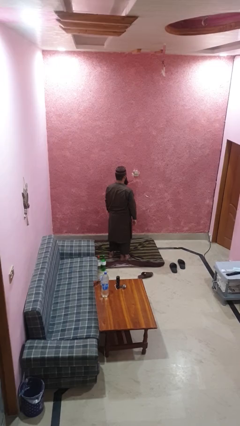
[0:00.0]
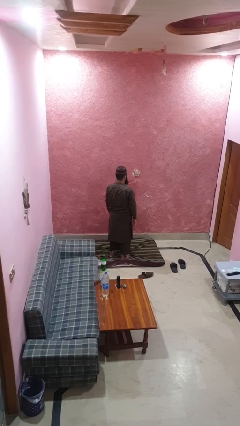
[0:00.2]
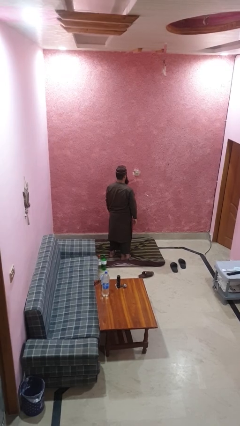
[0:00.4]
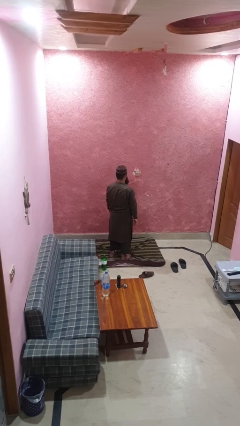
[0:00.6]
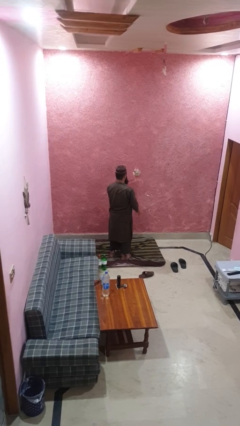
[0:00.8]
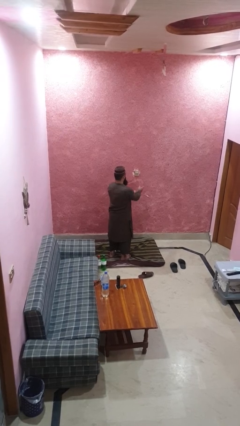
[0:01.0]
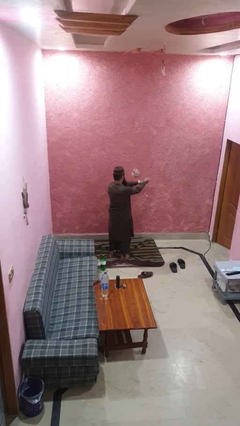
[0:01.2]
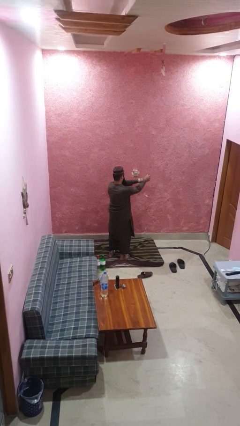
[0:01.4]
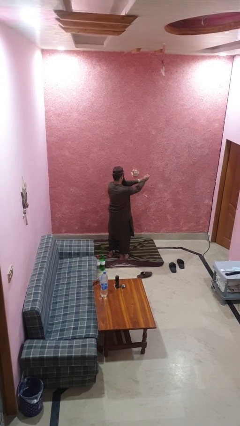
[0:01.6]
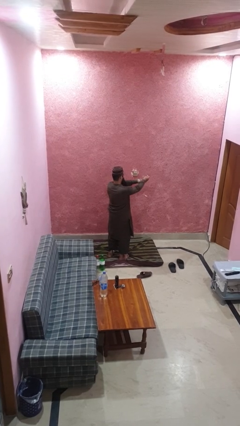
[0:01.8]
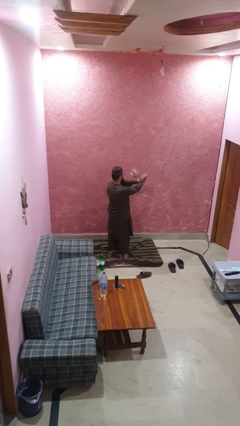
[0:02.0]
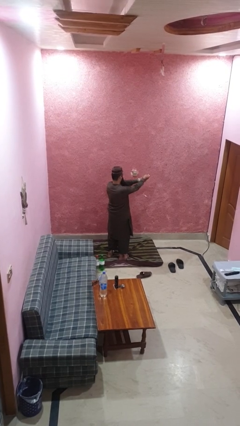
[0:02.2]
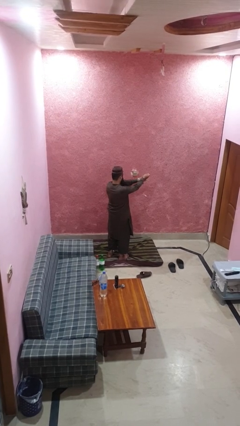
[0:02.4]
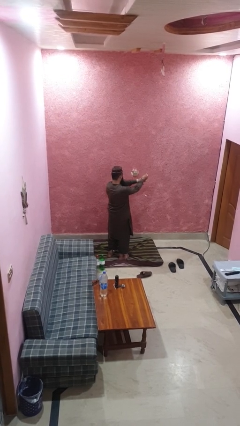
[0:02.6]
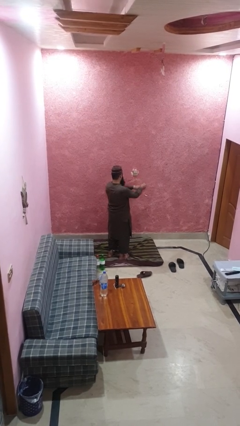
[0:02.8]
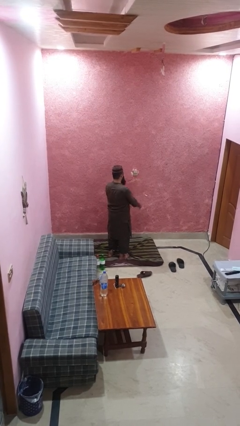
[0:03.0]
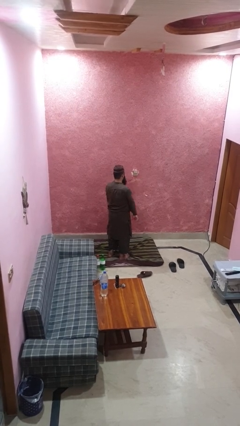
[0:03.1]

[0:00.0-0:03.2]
person snaps fingers

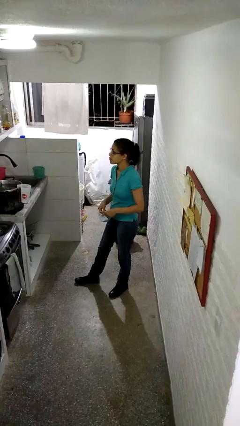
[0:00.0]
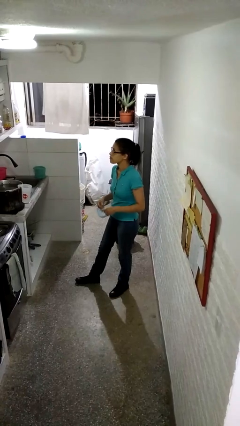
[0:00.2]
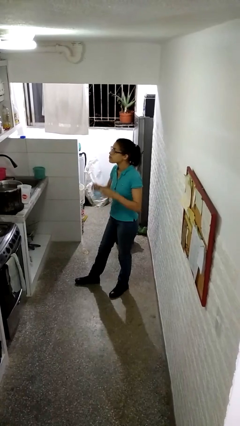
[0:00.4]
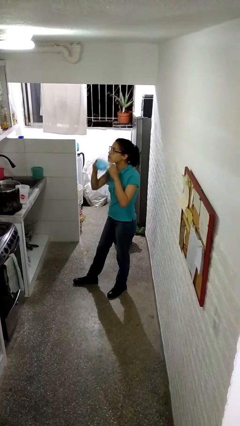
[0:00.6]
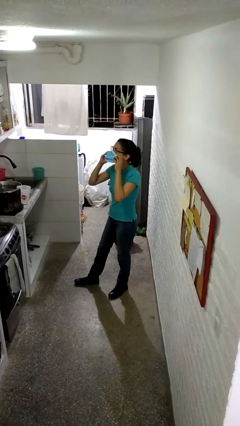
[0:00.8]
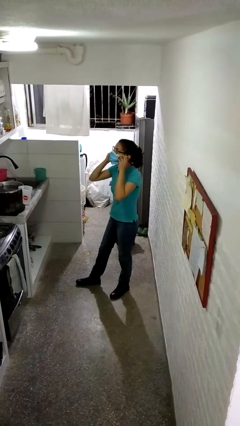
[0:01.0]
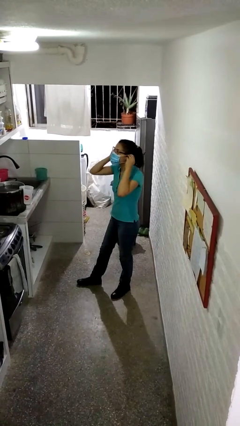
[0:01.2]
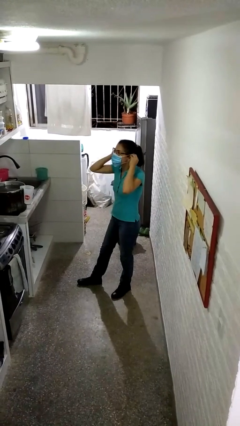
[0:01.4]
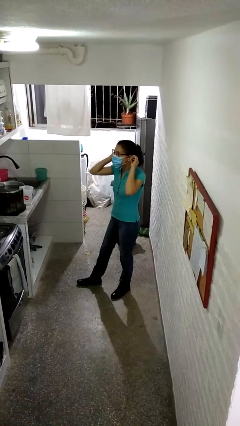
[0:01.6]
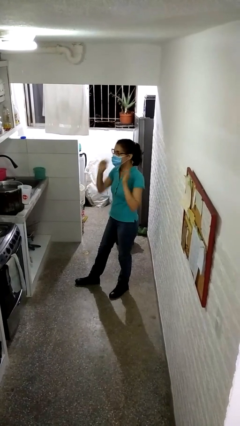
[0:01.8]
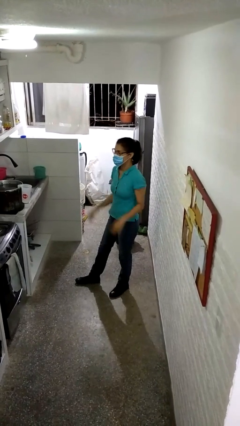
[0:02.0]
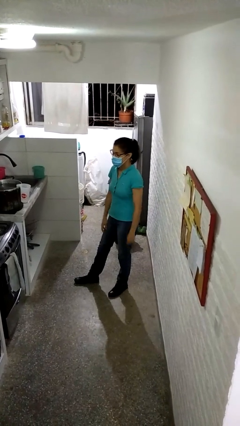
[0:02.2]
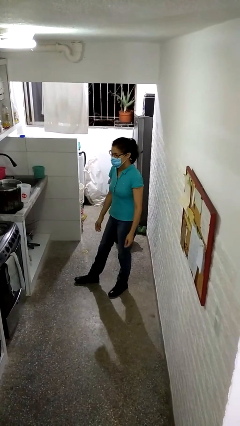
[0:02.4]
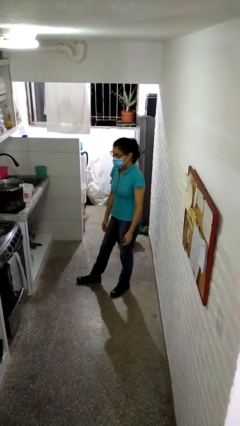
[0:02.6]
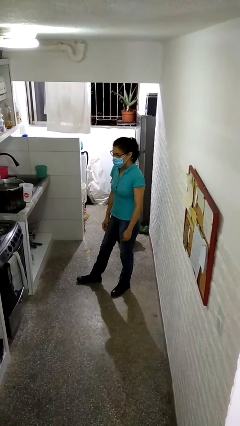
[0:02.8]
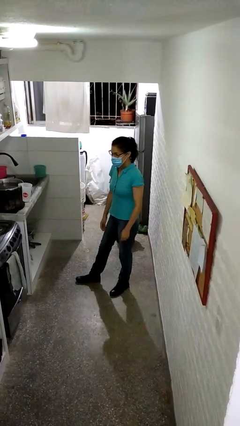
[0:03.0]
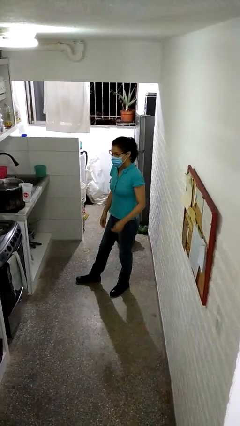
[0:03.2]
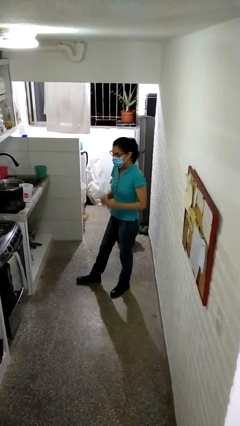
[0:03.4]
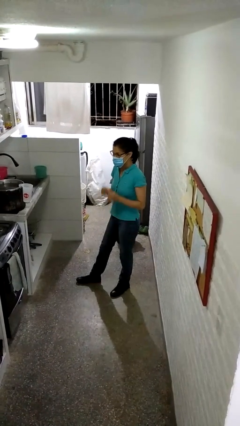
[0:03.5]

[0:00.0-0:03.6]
person puts on facemask

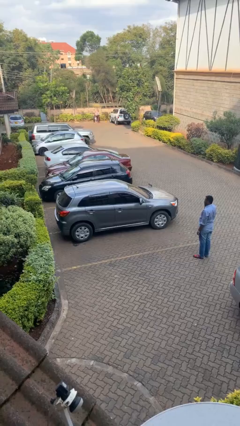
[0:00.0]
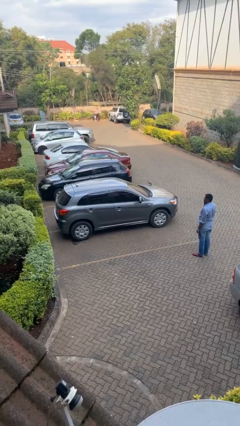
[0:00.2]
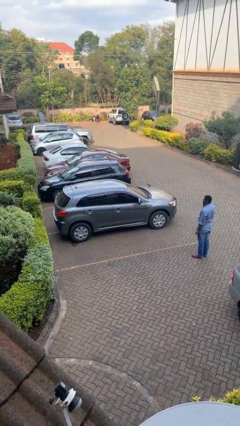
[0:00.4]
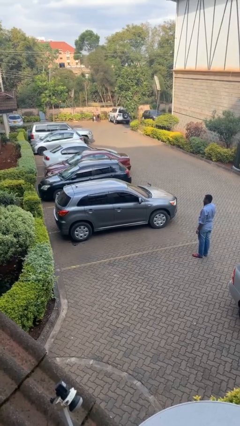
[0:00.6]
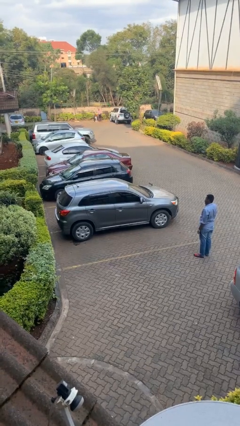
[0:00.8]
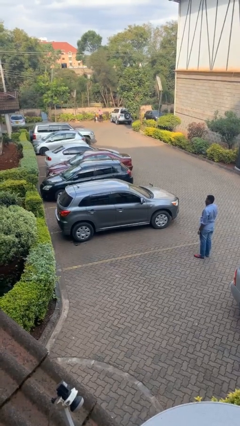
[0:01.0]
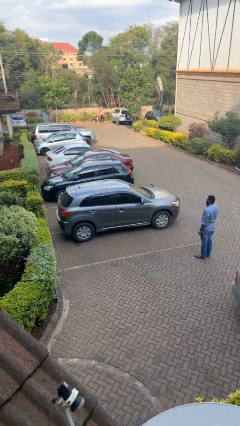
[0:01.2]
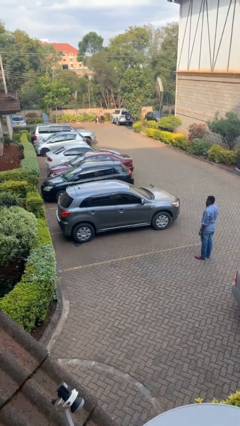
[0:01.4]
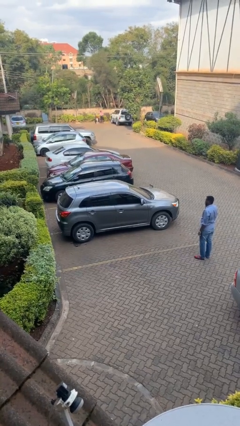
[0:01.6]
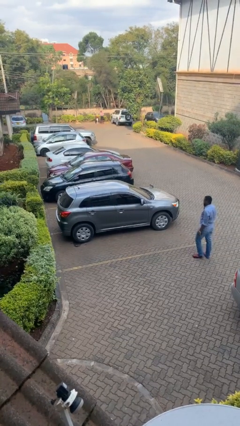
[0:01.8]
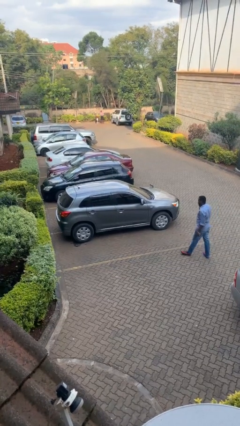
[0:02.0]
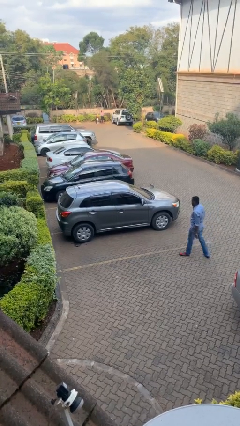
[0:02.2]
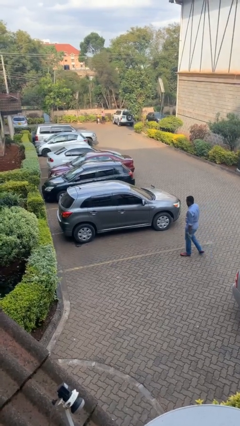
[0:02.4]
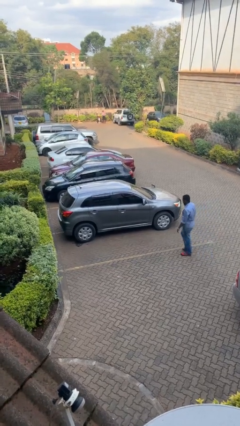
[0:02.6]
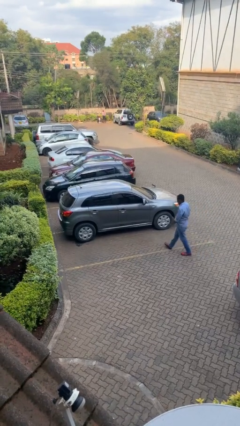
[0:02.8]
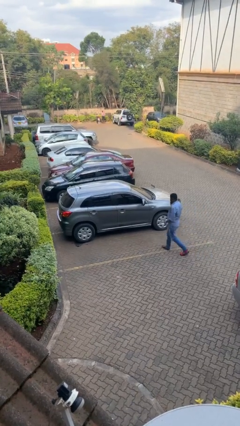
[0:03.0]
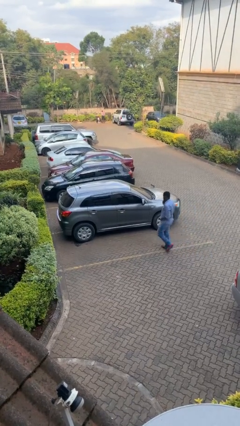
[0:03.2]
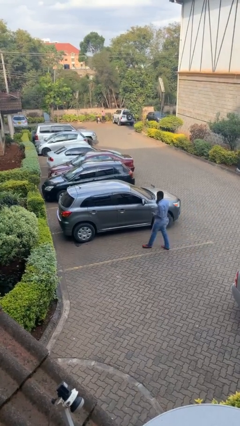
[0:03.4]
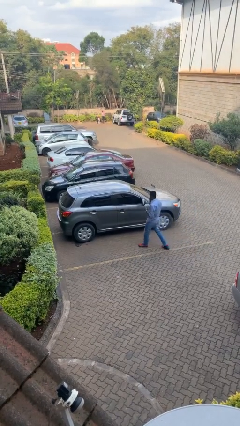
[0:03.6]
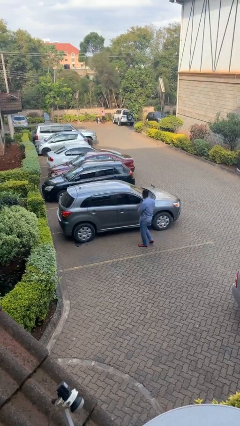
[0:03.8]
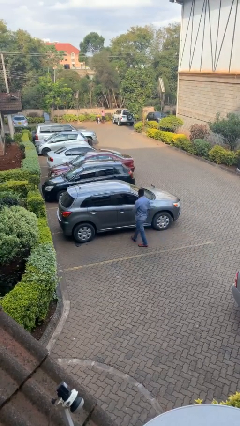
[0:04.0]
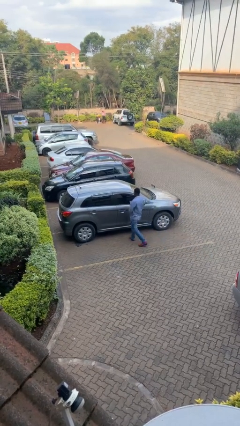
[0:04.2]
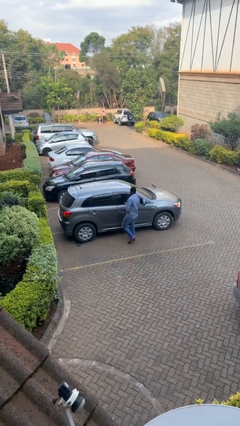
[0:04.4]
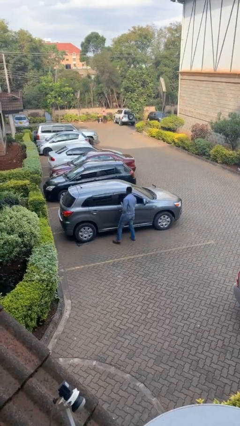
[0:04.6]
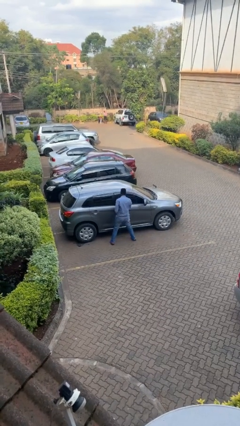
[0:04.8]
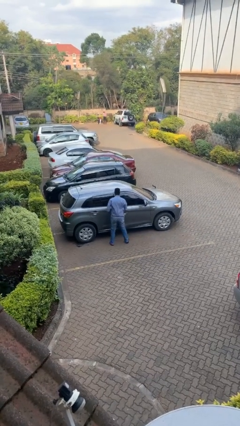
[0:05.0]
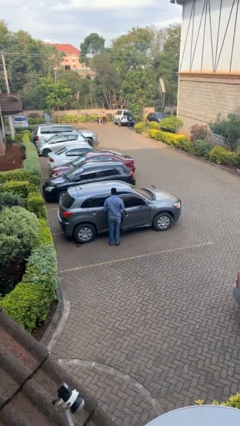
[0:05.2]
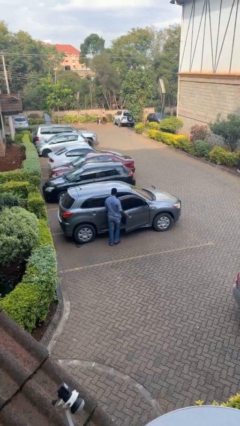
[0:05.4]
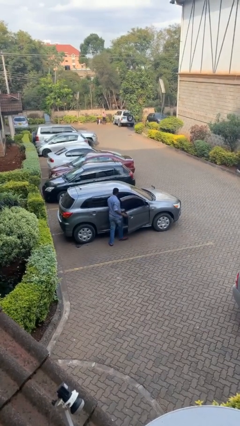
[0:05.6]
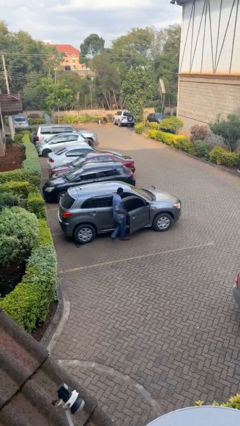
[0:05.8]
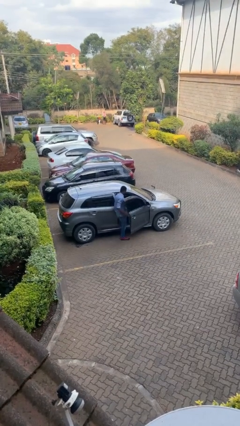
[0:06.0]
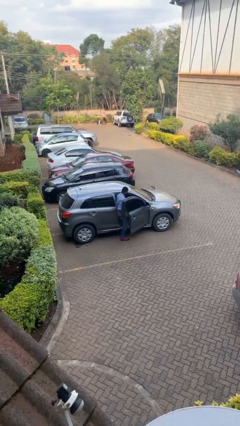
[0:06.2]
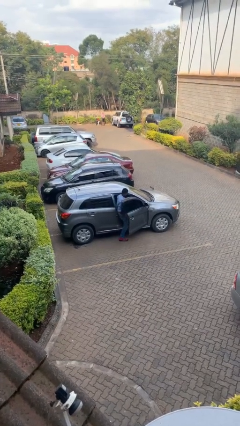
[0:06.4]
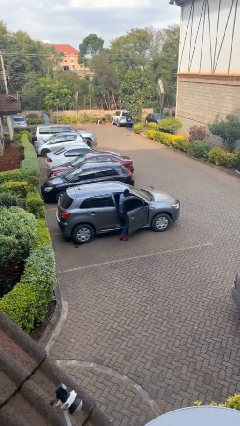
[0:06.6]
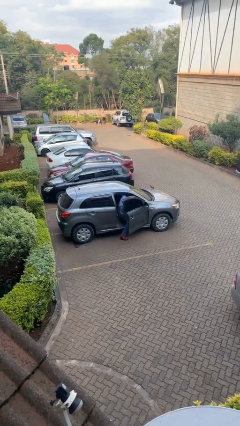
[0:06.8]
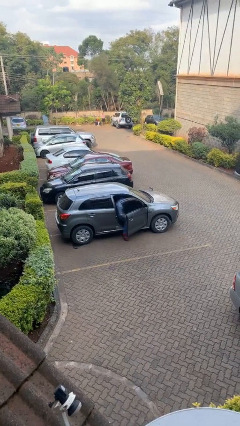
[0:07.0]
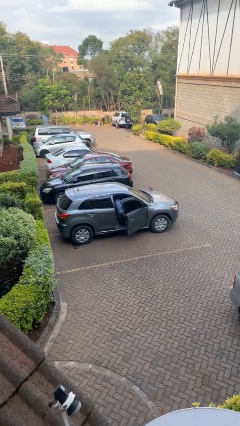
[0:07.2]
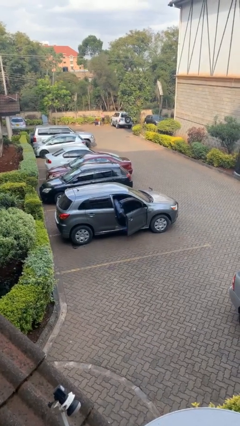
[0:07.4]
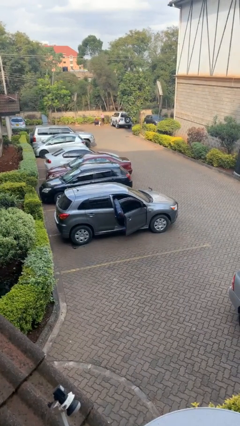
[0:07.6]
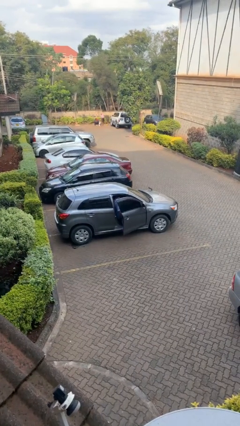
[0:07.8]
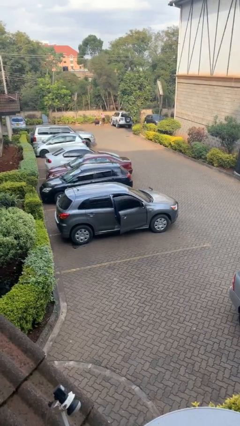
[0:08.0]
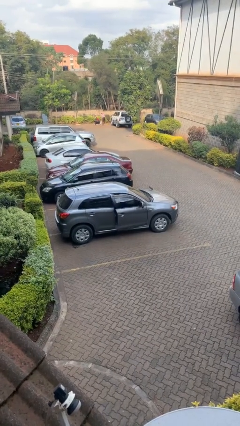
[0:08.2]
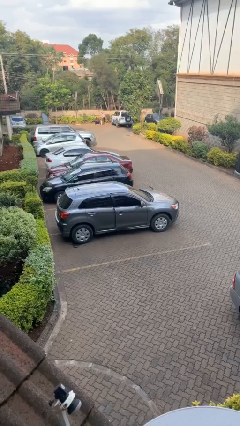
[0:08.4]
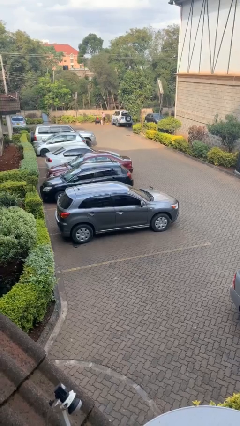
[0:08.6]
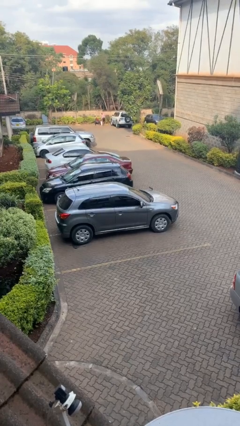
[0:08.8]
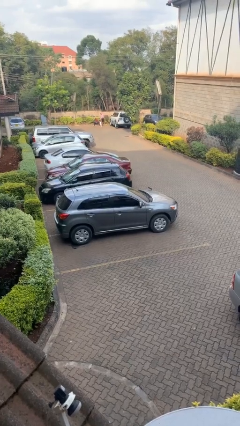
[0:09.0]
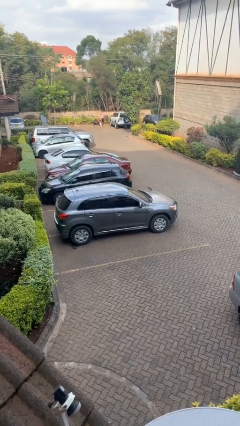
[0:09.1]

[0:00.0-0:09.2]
car picks up person

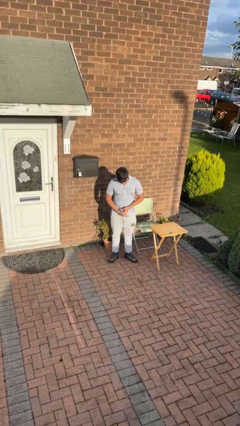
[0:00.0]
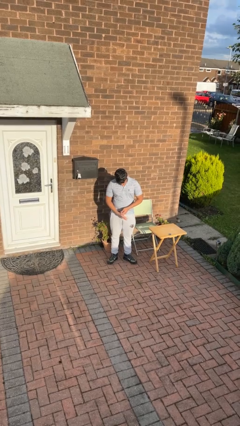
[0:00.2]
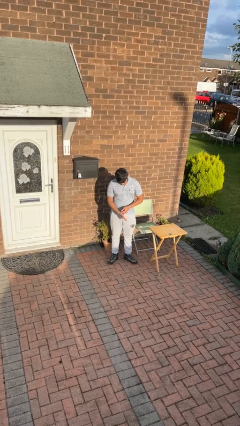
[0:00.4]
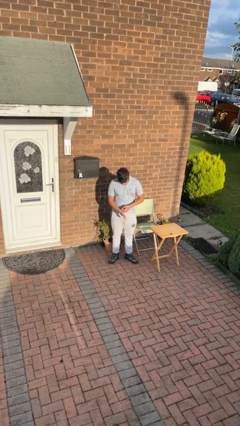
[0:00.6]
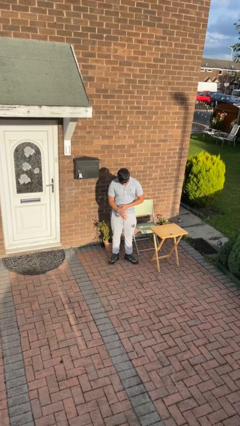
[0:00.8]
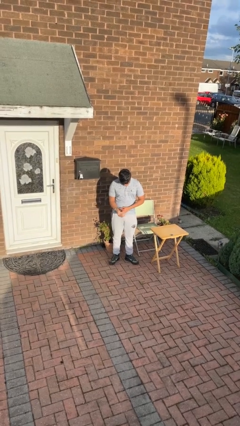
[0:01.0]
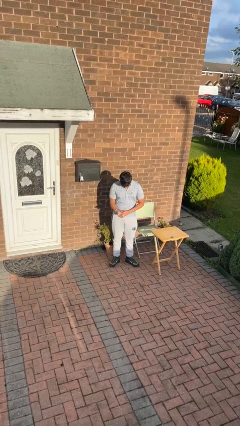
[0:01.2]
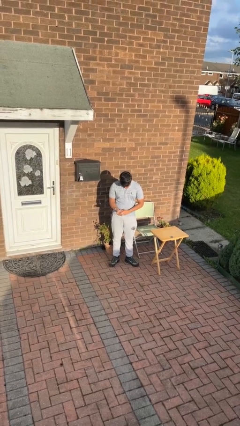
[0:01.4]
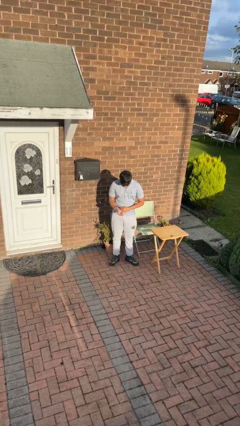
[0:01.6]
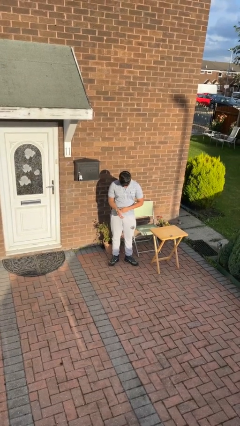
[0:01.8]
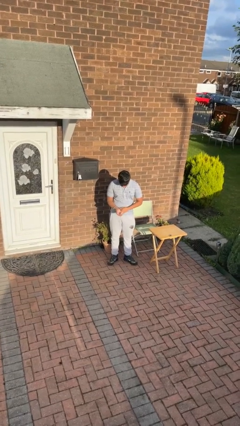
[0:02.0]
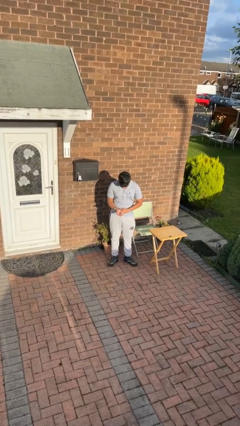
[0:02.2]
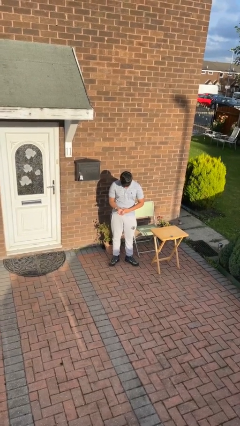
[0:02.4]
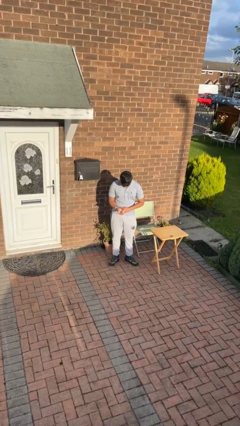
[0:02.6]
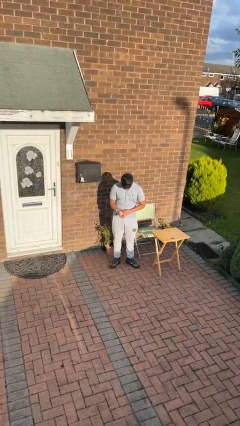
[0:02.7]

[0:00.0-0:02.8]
person puts on wristwatch
